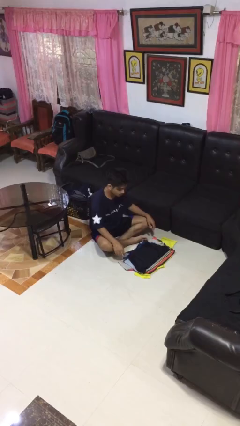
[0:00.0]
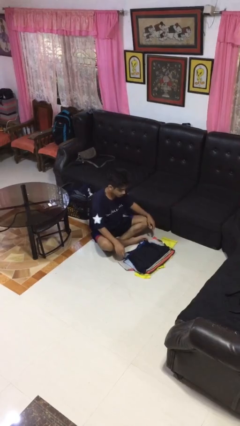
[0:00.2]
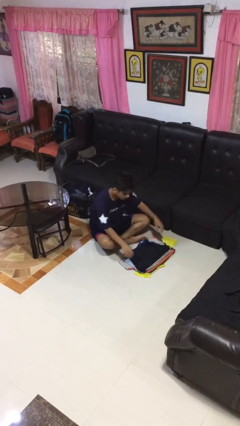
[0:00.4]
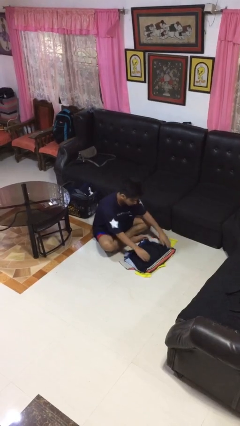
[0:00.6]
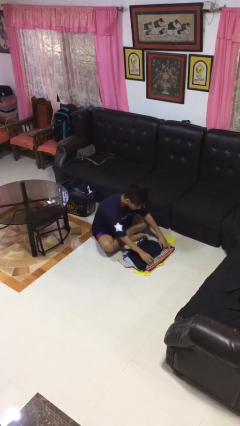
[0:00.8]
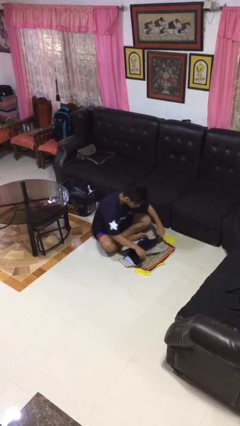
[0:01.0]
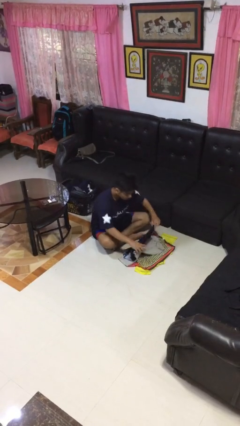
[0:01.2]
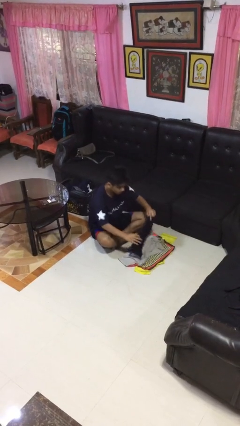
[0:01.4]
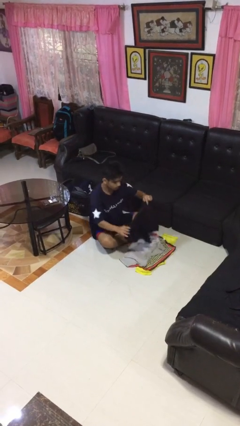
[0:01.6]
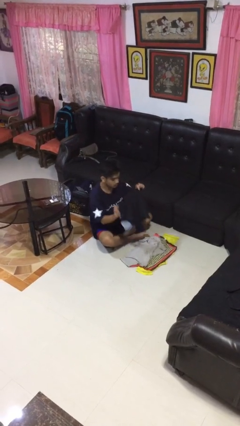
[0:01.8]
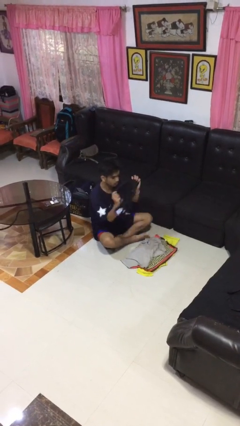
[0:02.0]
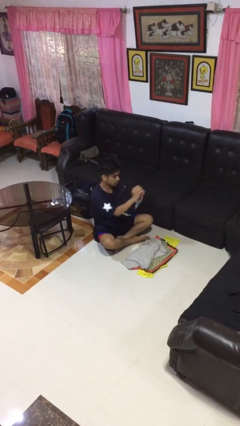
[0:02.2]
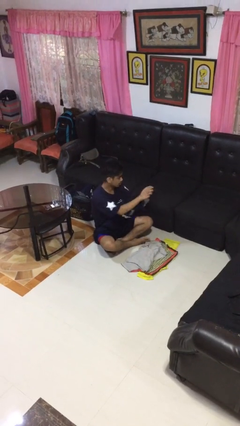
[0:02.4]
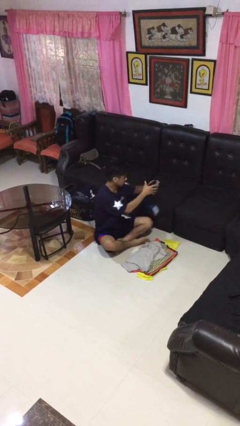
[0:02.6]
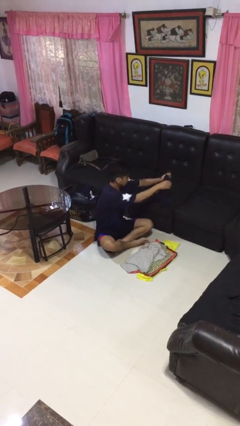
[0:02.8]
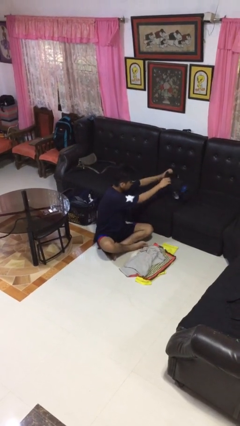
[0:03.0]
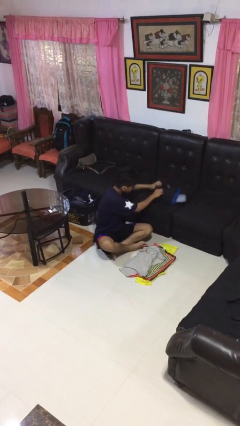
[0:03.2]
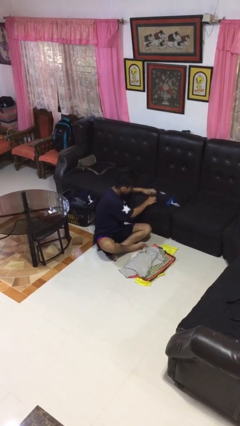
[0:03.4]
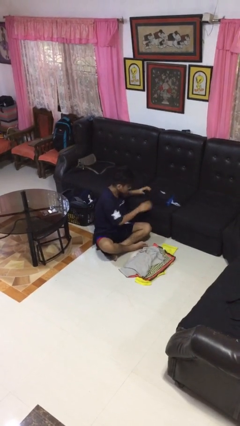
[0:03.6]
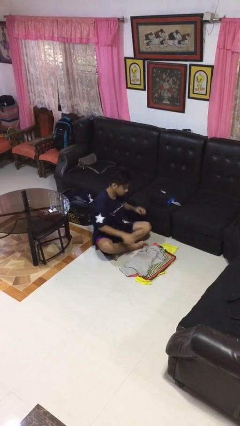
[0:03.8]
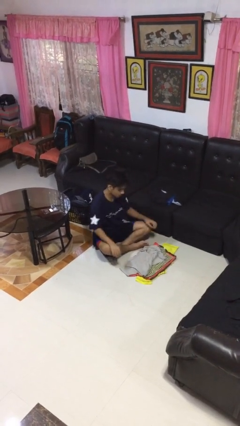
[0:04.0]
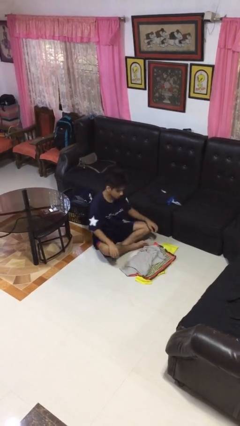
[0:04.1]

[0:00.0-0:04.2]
person folds shirt

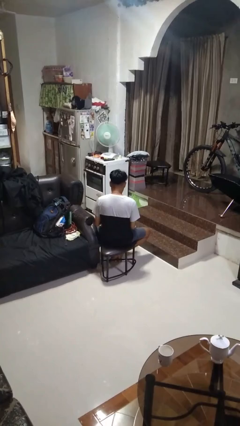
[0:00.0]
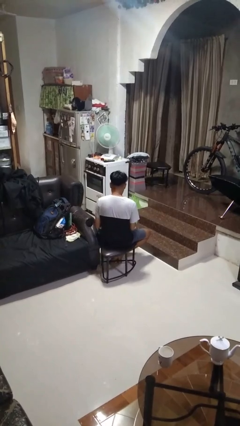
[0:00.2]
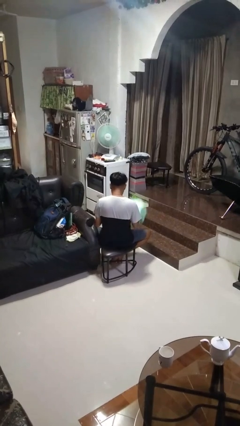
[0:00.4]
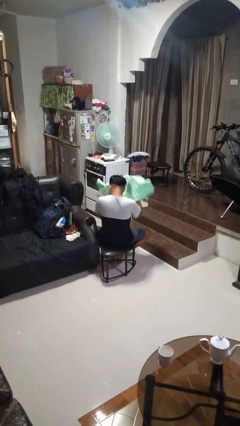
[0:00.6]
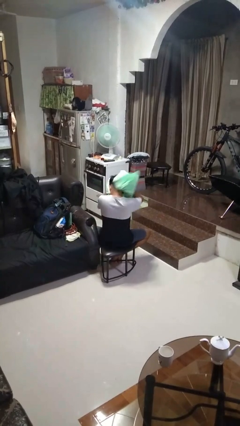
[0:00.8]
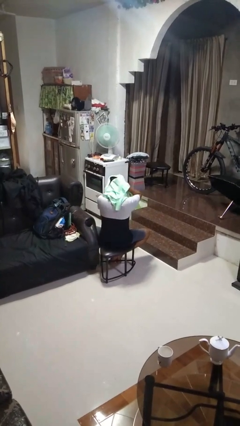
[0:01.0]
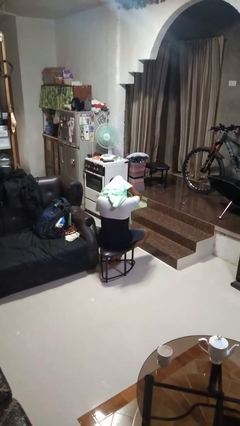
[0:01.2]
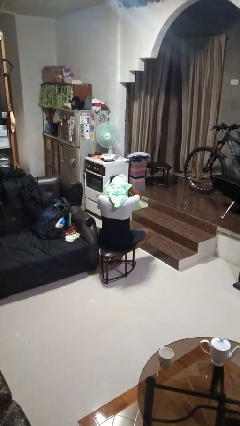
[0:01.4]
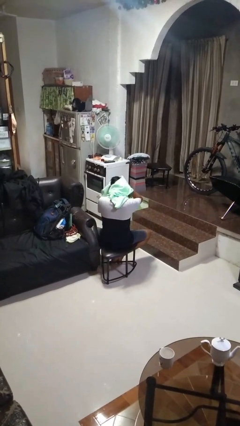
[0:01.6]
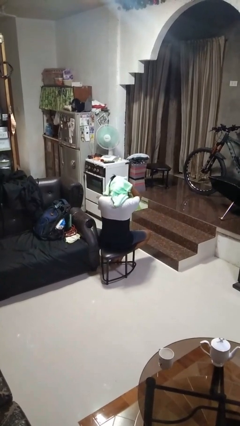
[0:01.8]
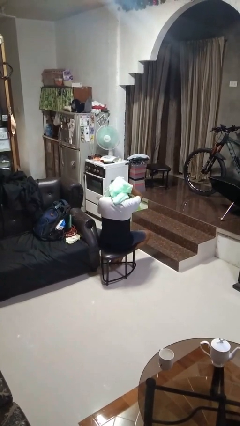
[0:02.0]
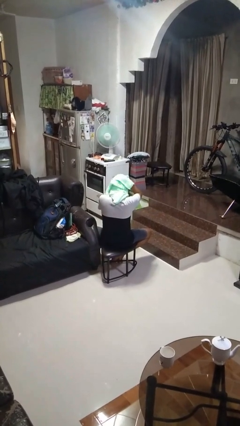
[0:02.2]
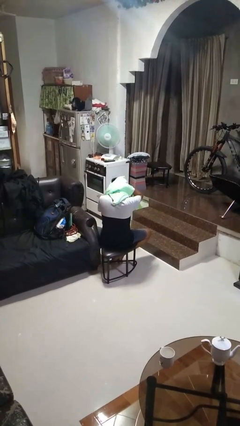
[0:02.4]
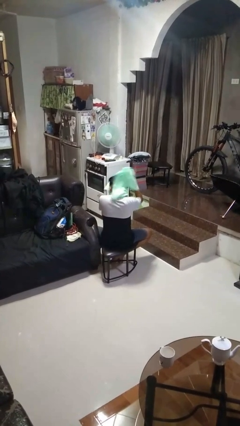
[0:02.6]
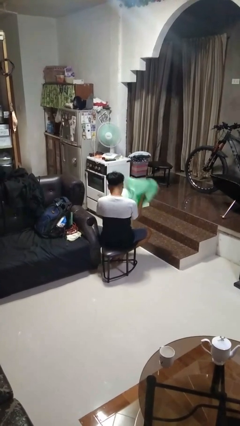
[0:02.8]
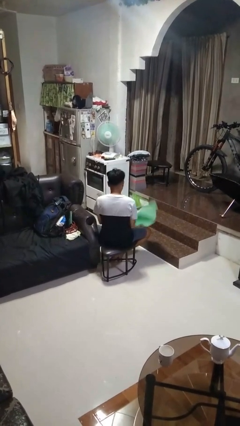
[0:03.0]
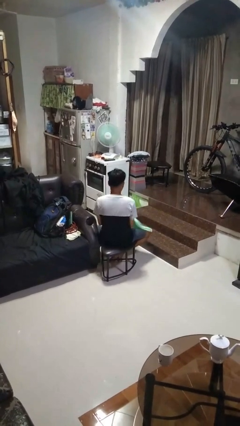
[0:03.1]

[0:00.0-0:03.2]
person dries hair with towel

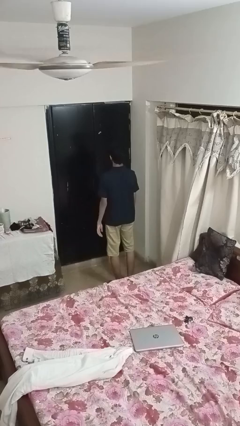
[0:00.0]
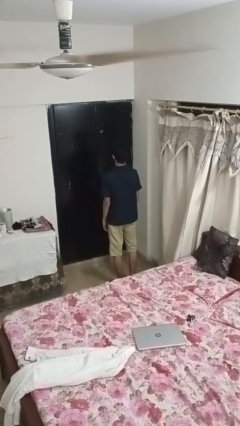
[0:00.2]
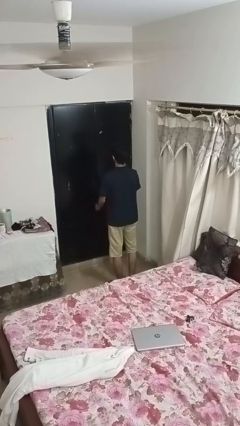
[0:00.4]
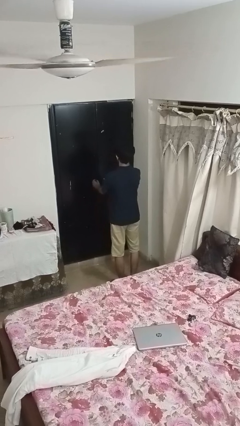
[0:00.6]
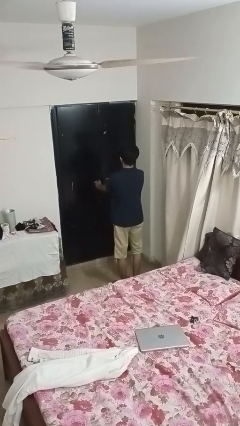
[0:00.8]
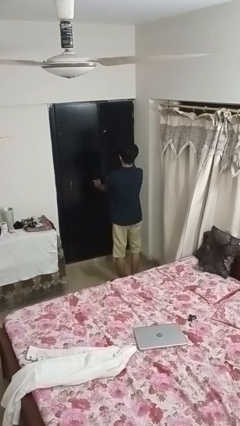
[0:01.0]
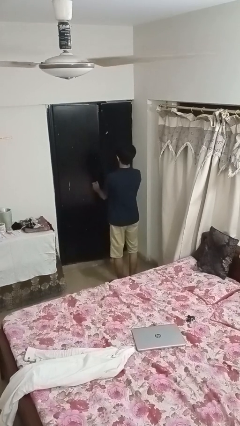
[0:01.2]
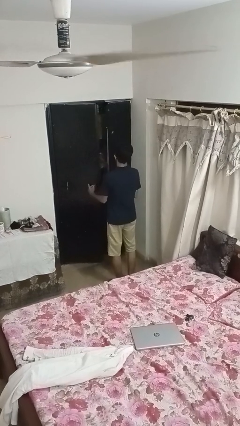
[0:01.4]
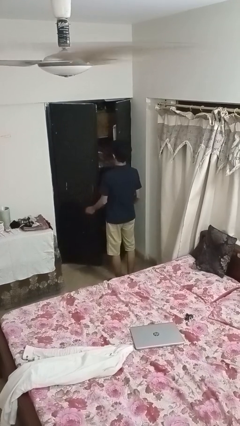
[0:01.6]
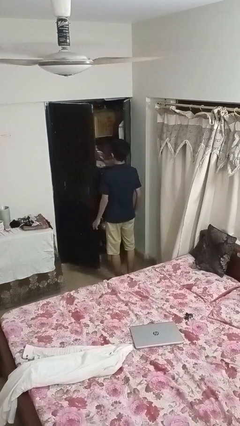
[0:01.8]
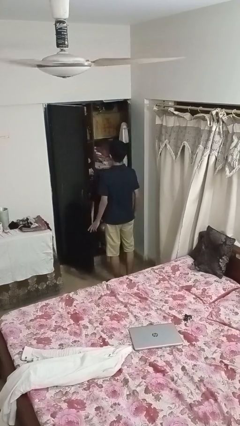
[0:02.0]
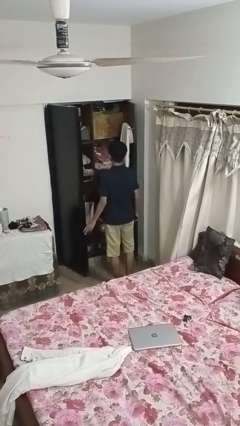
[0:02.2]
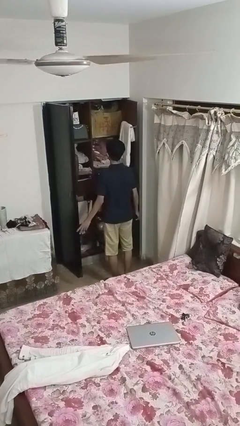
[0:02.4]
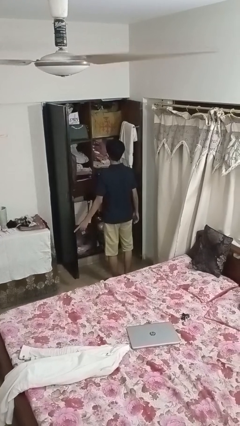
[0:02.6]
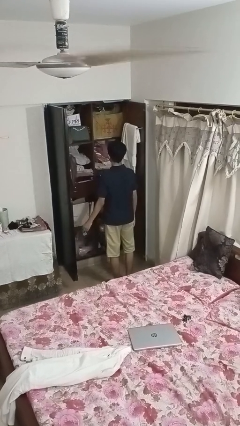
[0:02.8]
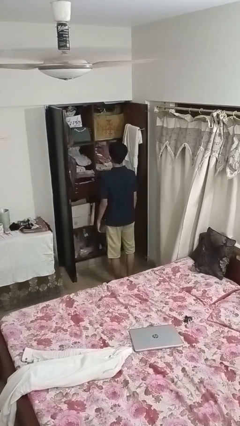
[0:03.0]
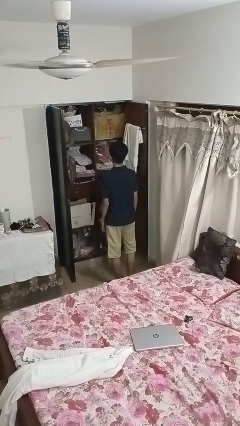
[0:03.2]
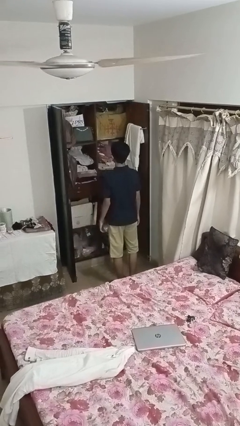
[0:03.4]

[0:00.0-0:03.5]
person opens closet door

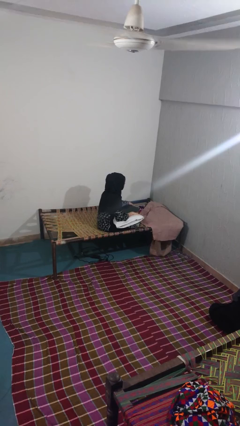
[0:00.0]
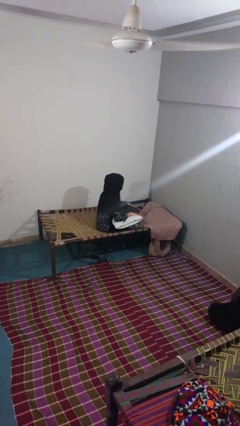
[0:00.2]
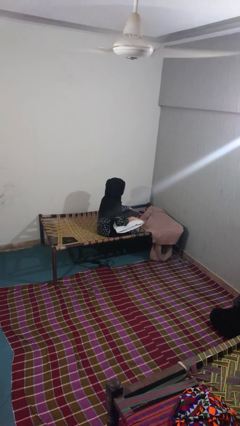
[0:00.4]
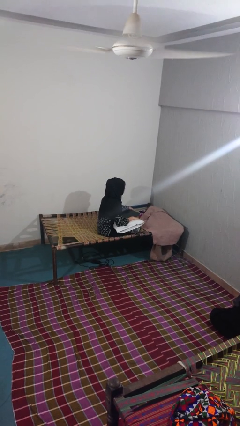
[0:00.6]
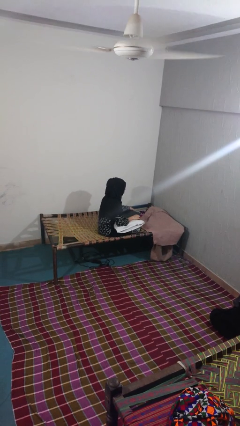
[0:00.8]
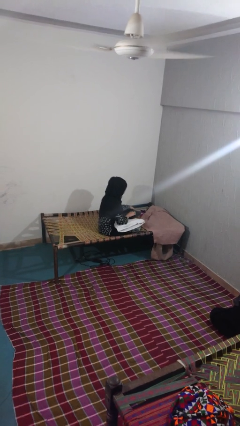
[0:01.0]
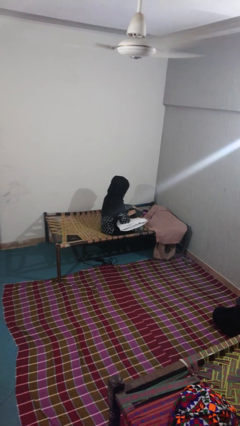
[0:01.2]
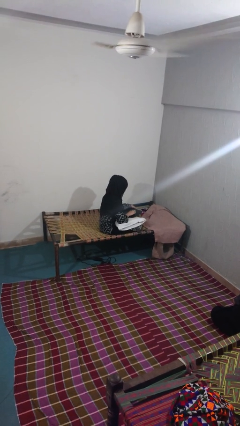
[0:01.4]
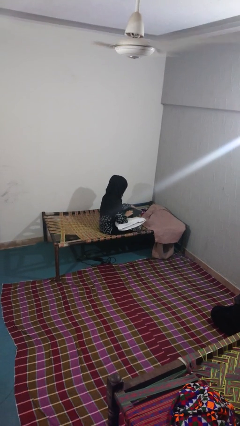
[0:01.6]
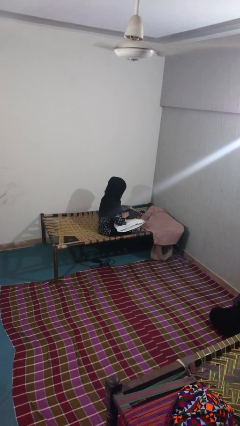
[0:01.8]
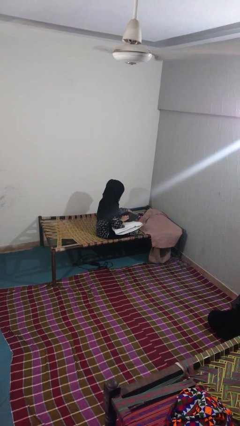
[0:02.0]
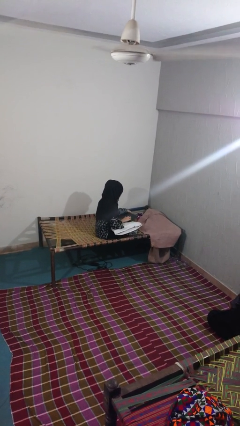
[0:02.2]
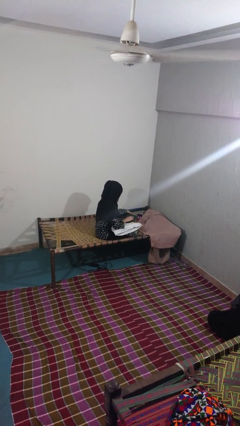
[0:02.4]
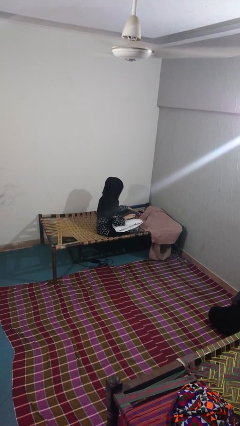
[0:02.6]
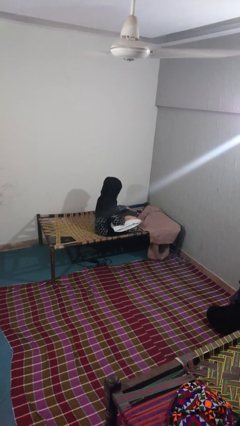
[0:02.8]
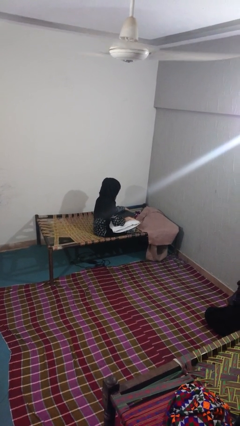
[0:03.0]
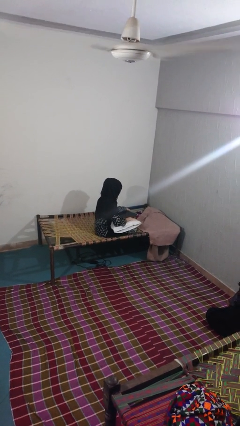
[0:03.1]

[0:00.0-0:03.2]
person interacts with tablet

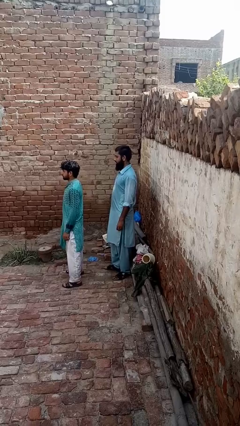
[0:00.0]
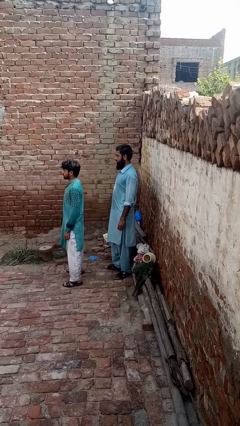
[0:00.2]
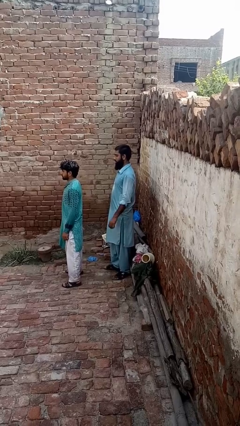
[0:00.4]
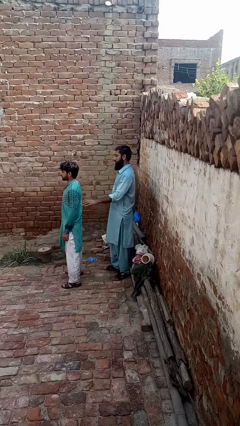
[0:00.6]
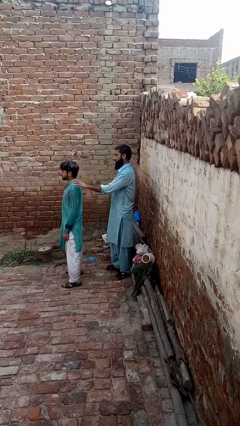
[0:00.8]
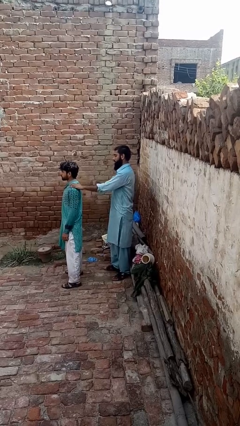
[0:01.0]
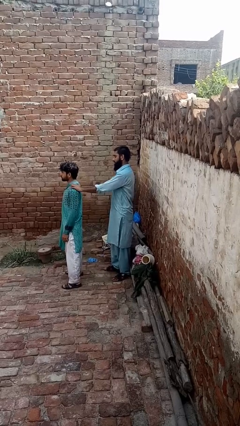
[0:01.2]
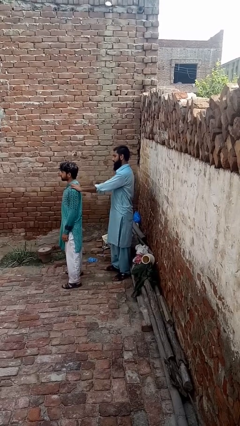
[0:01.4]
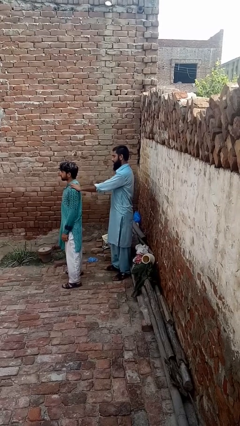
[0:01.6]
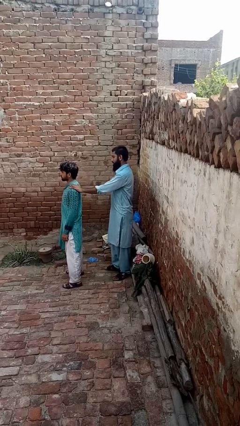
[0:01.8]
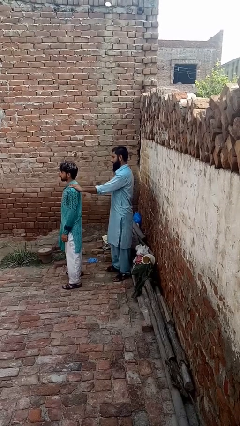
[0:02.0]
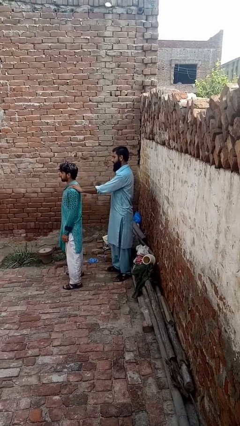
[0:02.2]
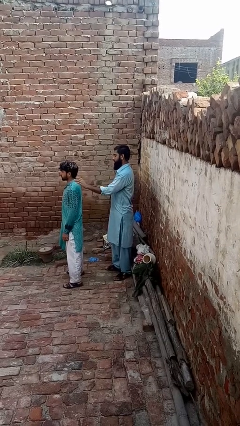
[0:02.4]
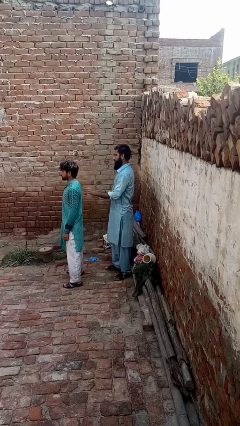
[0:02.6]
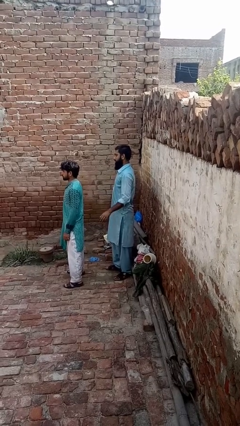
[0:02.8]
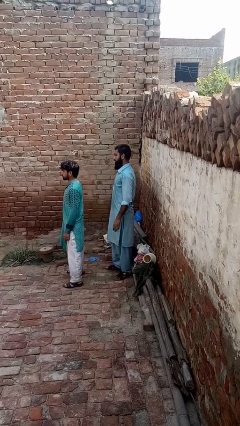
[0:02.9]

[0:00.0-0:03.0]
person touches back of person

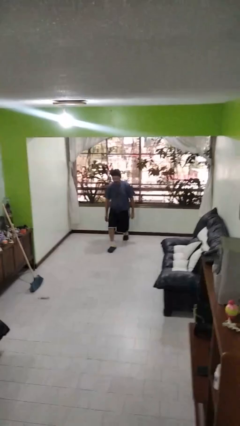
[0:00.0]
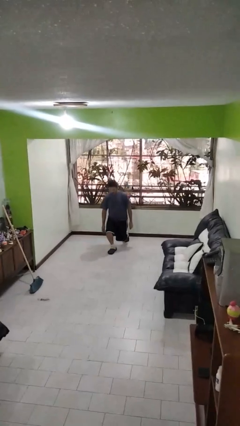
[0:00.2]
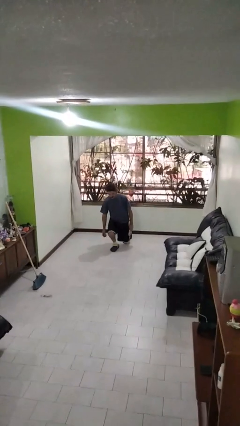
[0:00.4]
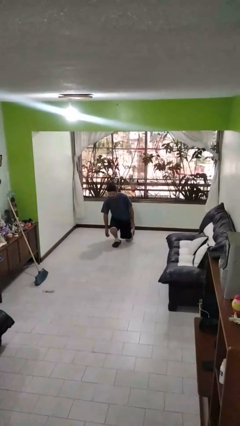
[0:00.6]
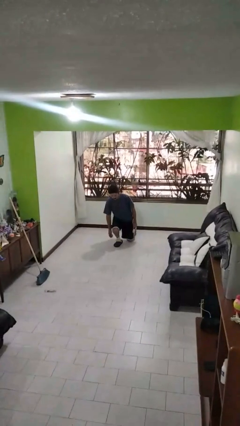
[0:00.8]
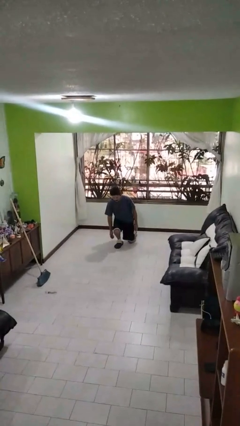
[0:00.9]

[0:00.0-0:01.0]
person kneels
